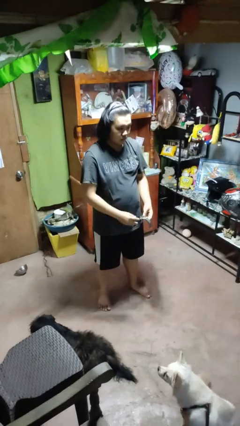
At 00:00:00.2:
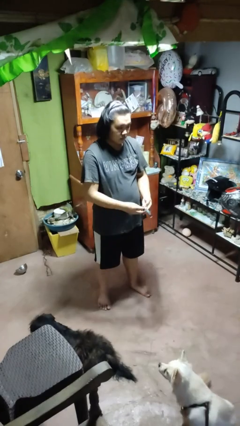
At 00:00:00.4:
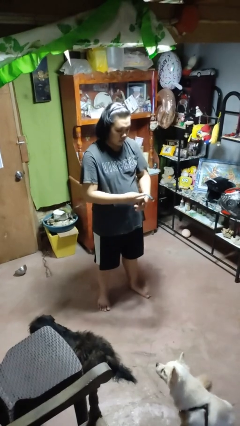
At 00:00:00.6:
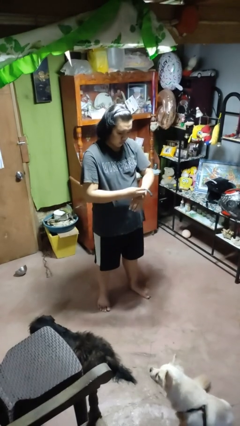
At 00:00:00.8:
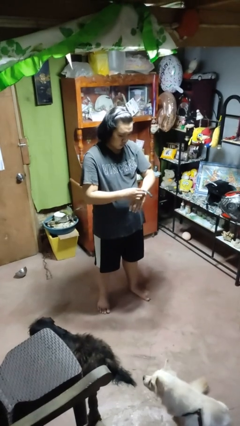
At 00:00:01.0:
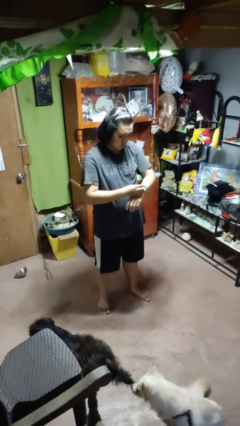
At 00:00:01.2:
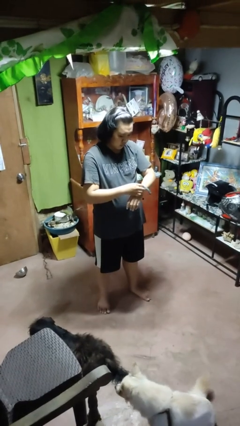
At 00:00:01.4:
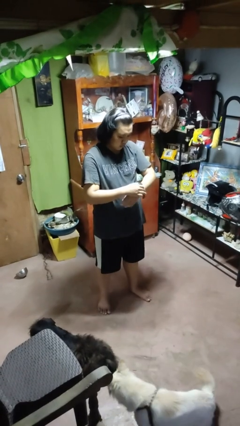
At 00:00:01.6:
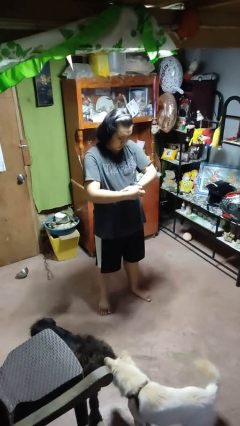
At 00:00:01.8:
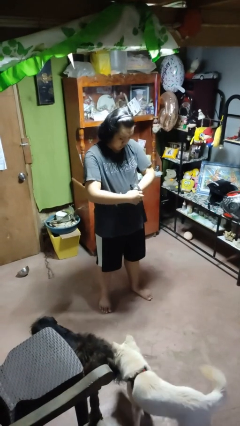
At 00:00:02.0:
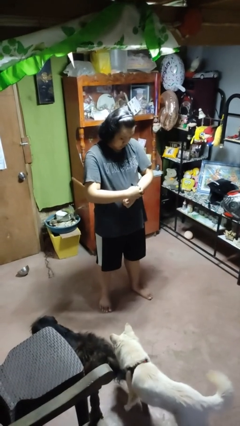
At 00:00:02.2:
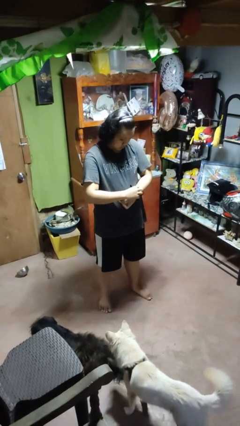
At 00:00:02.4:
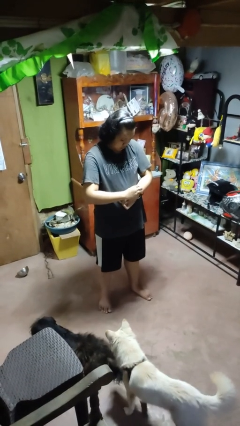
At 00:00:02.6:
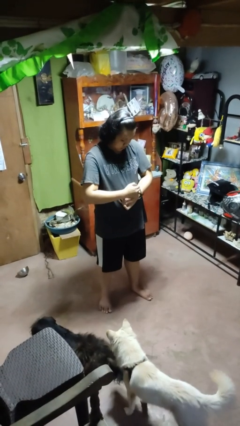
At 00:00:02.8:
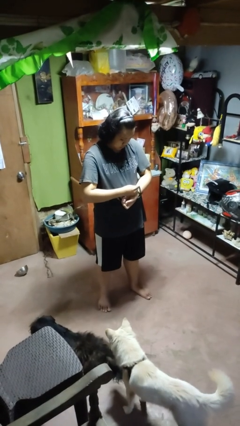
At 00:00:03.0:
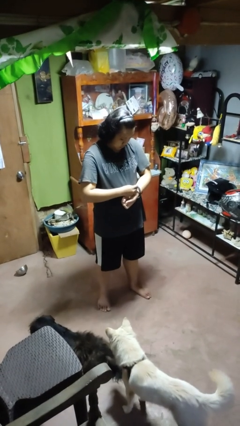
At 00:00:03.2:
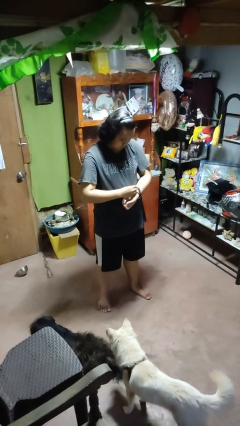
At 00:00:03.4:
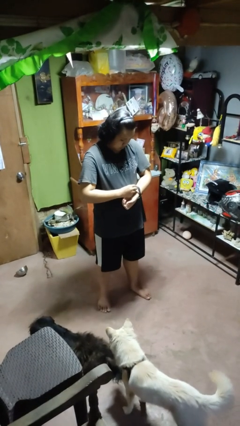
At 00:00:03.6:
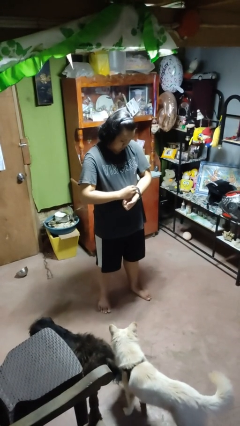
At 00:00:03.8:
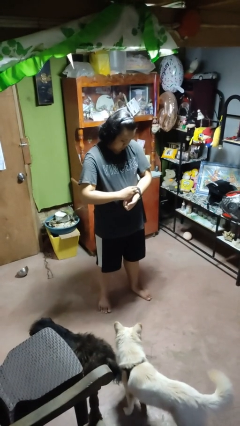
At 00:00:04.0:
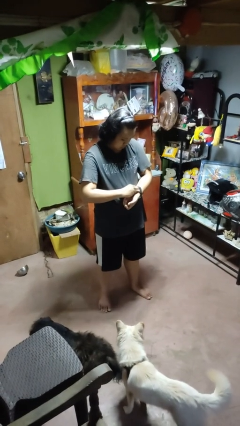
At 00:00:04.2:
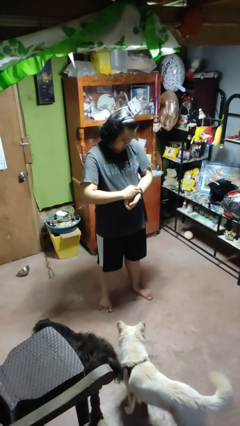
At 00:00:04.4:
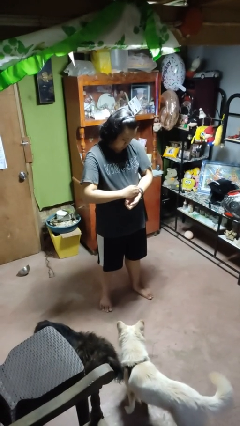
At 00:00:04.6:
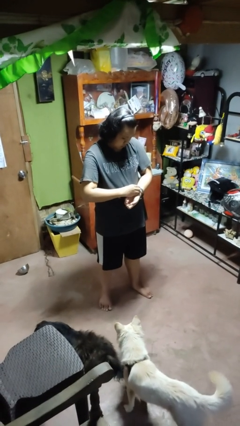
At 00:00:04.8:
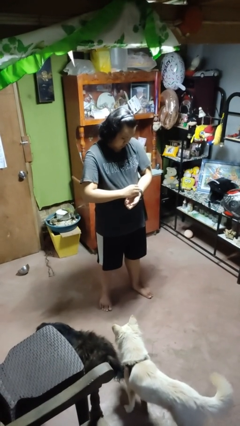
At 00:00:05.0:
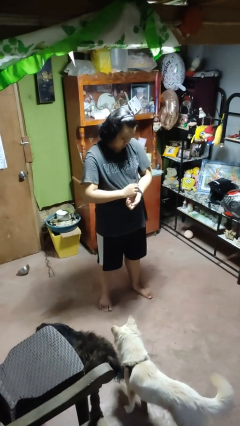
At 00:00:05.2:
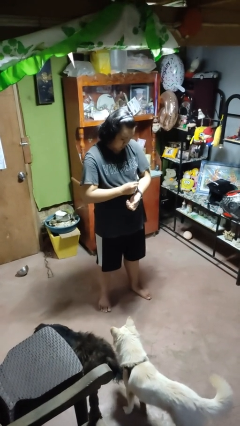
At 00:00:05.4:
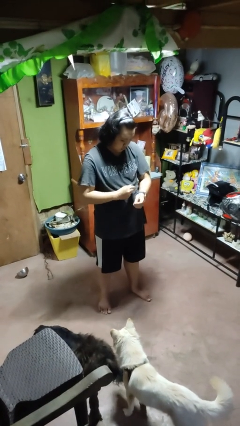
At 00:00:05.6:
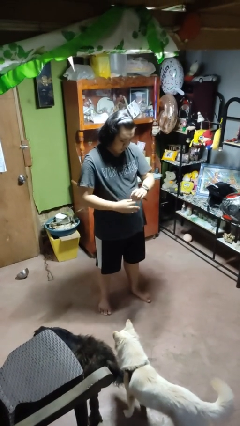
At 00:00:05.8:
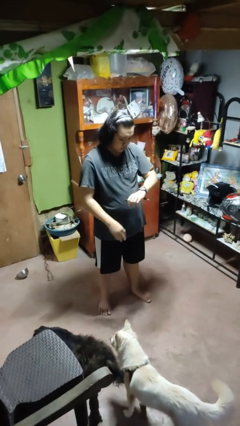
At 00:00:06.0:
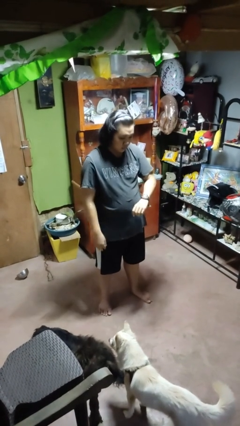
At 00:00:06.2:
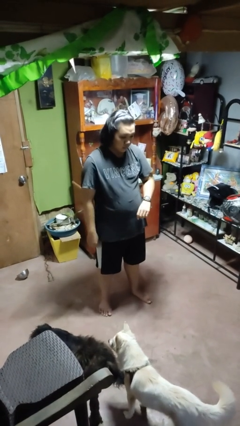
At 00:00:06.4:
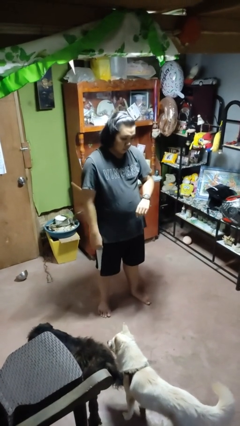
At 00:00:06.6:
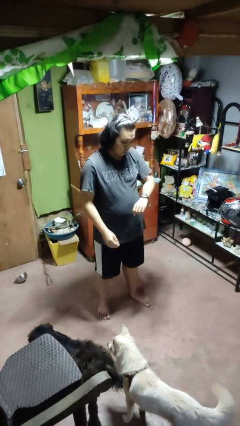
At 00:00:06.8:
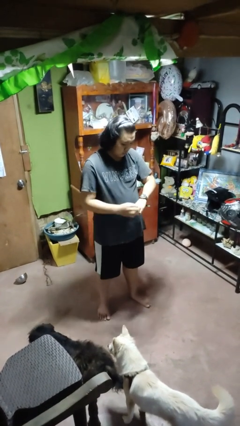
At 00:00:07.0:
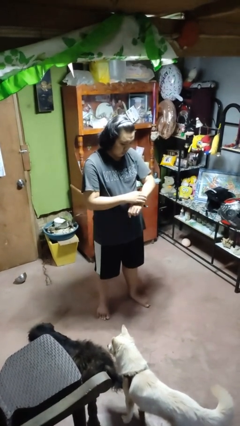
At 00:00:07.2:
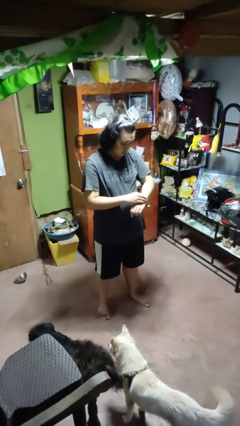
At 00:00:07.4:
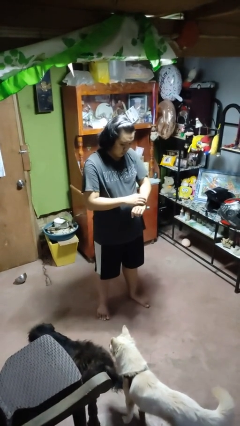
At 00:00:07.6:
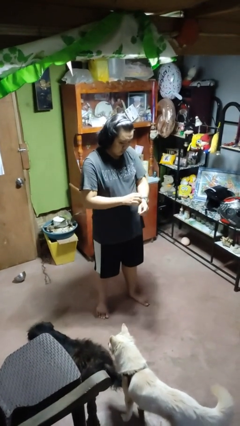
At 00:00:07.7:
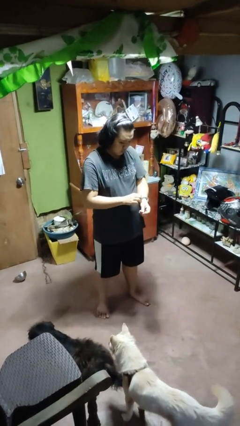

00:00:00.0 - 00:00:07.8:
person puts on wristwatch

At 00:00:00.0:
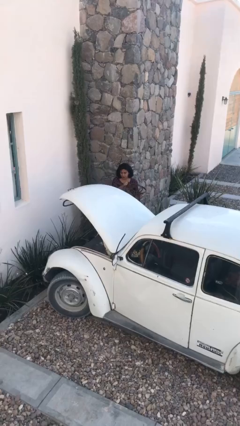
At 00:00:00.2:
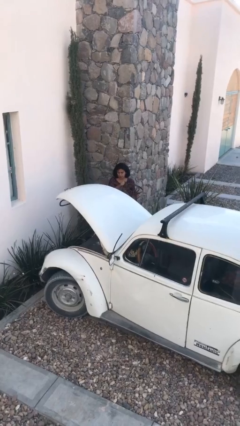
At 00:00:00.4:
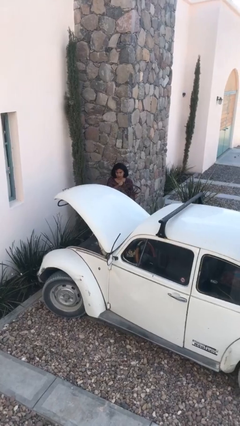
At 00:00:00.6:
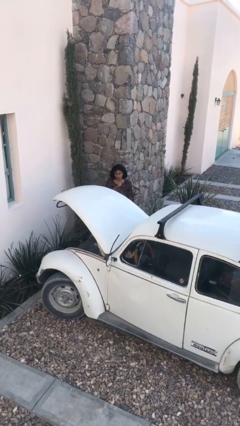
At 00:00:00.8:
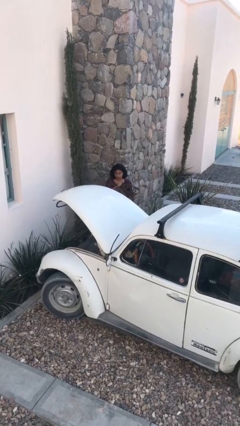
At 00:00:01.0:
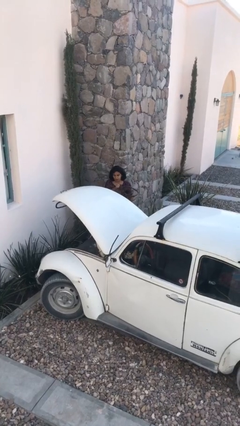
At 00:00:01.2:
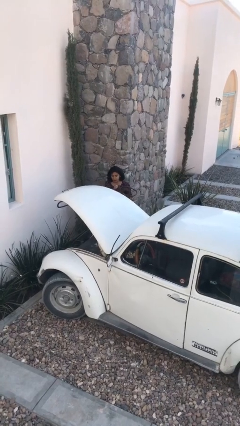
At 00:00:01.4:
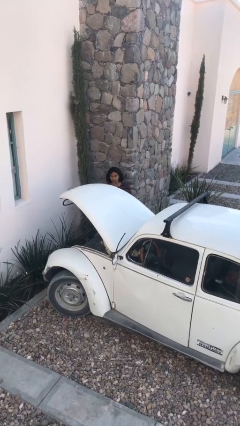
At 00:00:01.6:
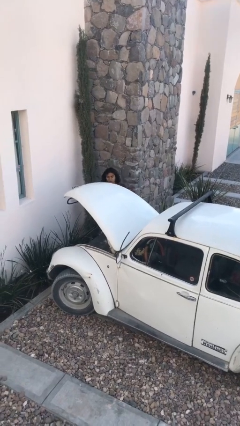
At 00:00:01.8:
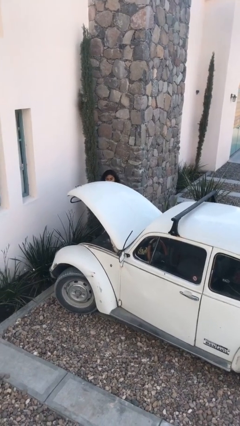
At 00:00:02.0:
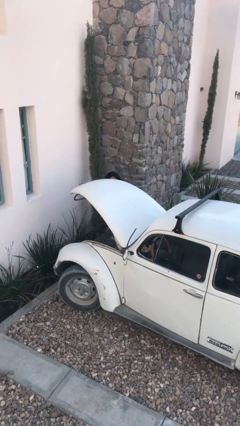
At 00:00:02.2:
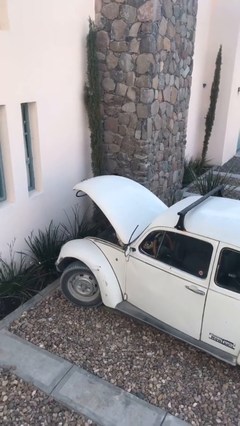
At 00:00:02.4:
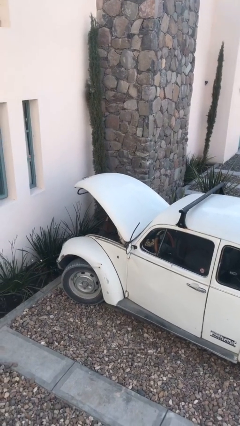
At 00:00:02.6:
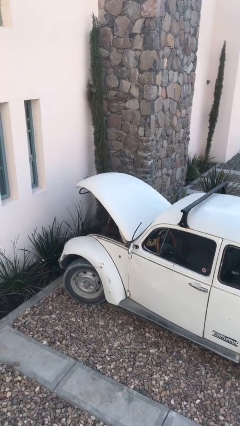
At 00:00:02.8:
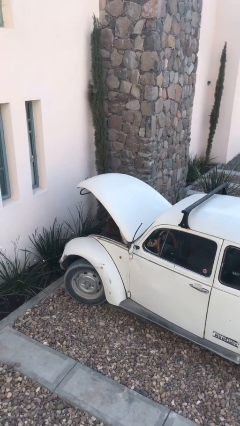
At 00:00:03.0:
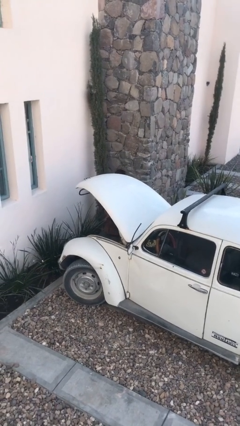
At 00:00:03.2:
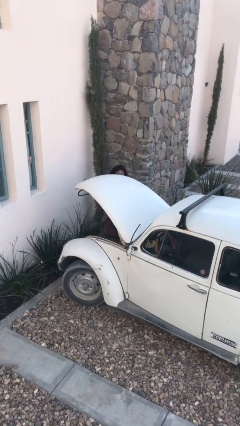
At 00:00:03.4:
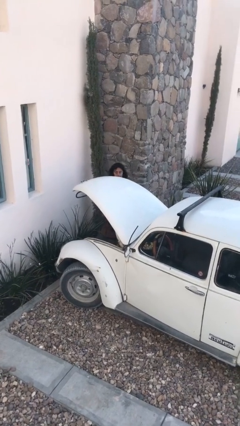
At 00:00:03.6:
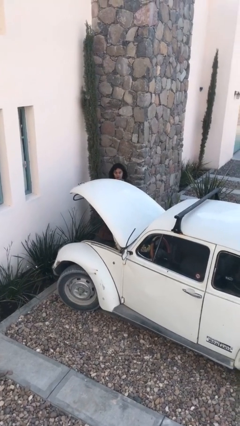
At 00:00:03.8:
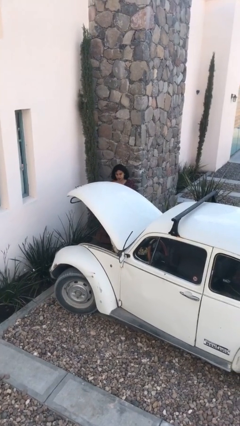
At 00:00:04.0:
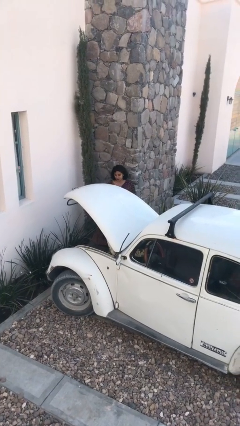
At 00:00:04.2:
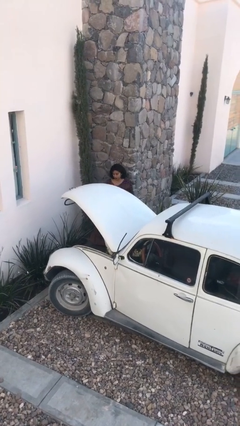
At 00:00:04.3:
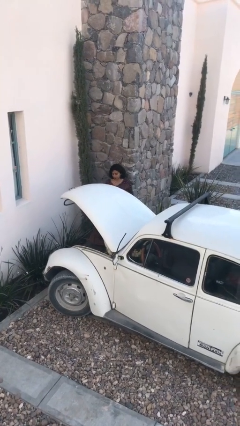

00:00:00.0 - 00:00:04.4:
person loads car

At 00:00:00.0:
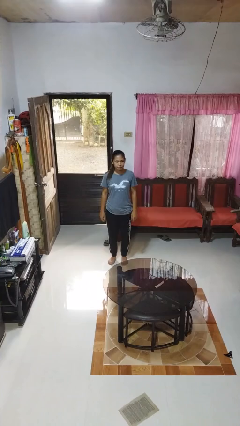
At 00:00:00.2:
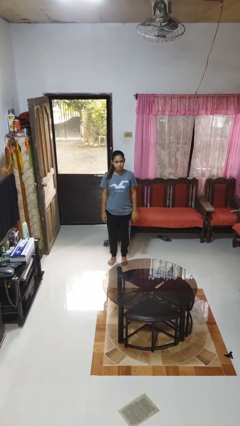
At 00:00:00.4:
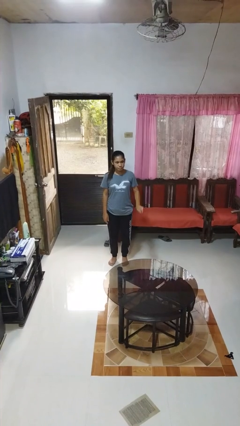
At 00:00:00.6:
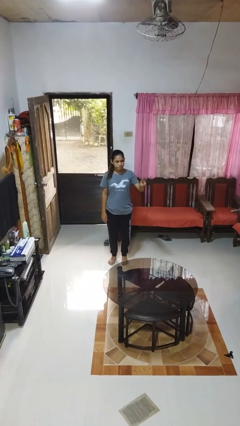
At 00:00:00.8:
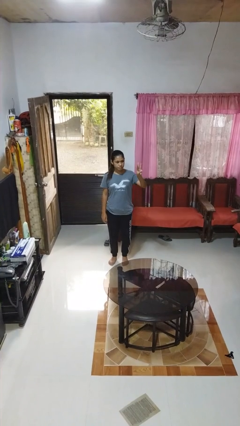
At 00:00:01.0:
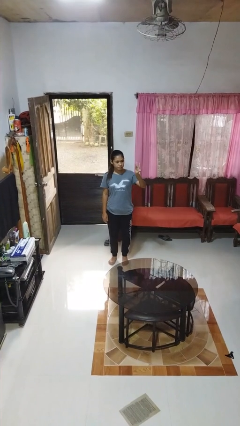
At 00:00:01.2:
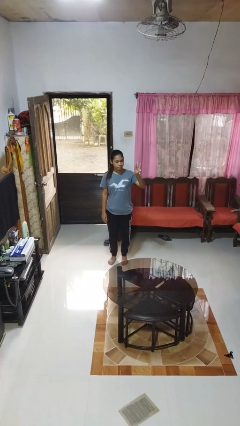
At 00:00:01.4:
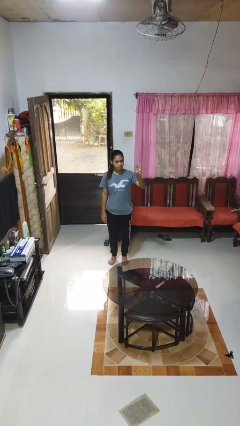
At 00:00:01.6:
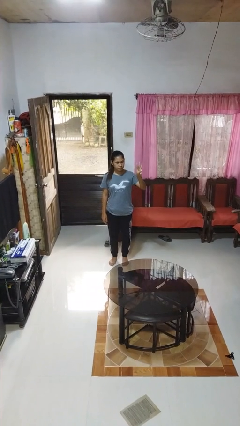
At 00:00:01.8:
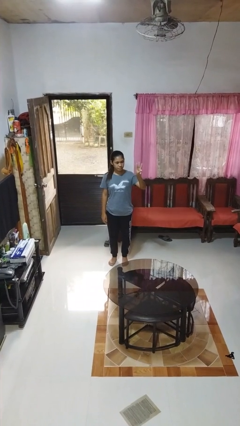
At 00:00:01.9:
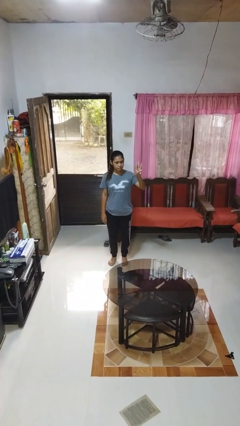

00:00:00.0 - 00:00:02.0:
person gestures number three

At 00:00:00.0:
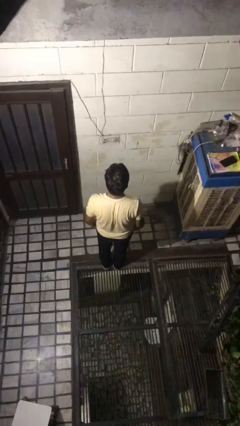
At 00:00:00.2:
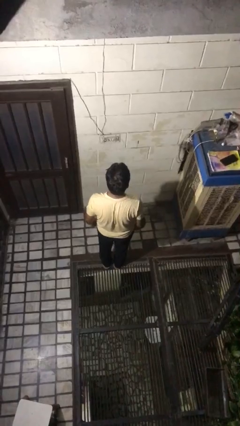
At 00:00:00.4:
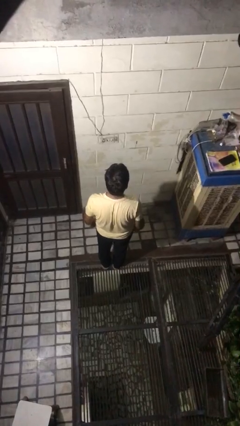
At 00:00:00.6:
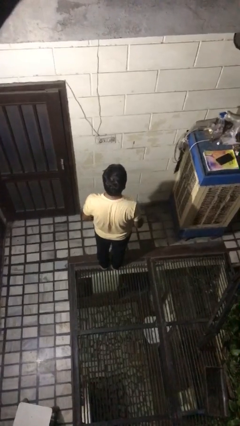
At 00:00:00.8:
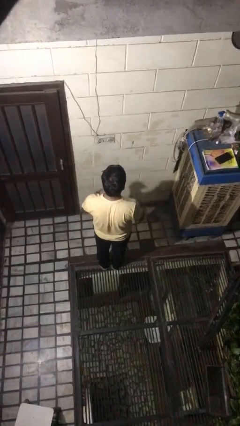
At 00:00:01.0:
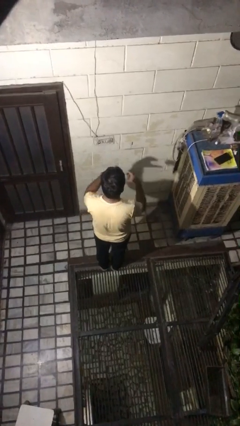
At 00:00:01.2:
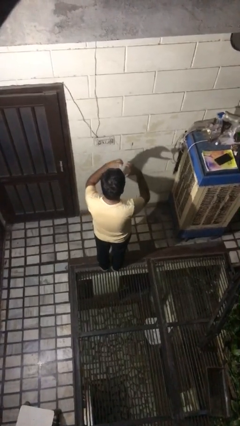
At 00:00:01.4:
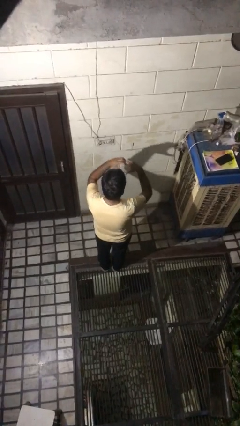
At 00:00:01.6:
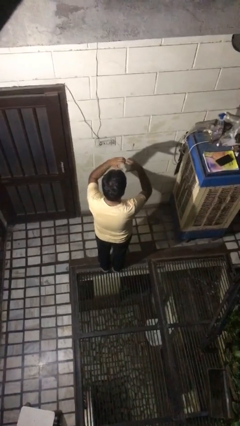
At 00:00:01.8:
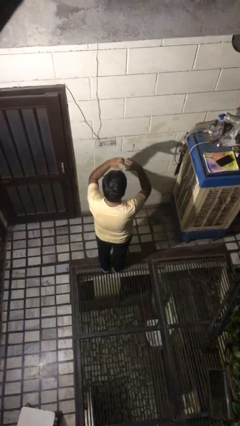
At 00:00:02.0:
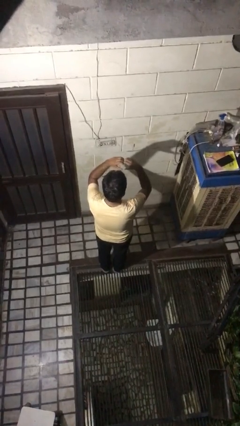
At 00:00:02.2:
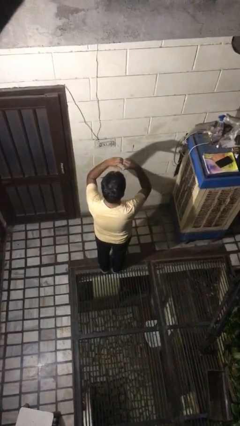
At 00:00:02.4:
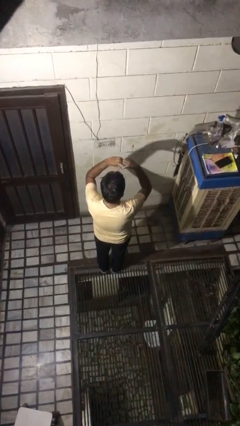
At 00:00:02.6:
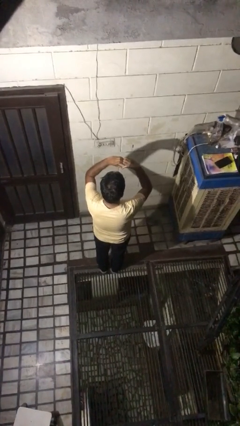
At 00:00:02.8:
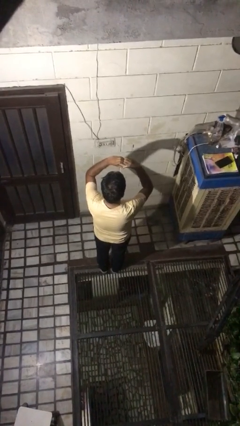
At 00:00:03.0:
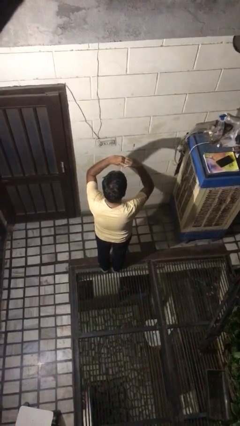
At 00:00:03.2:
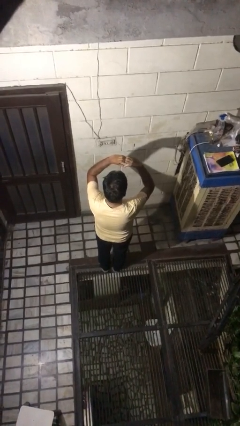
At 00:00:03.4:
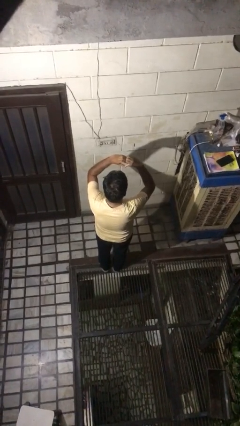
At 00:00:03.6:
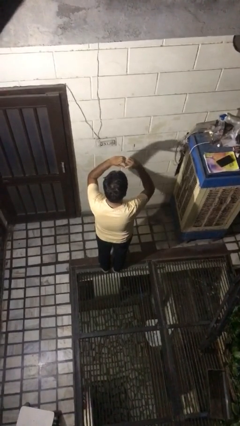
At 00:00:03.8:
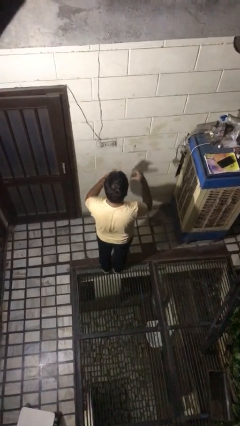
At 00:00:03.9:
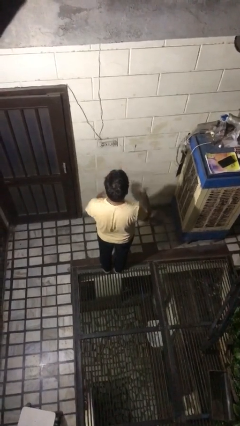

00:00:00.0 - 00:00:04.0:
person gestures heart
